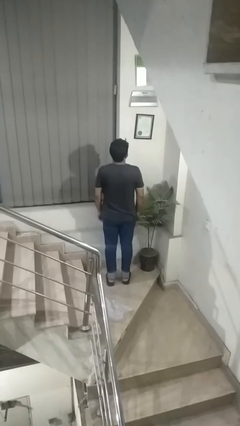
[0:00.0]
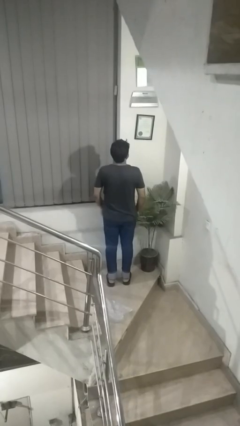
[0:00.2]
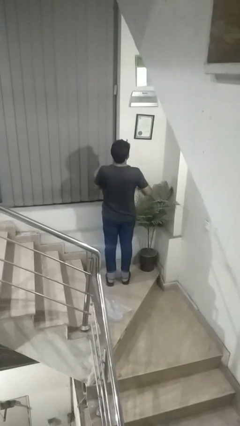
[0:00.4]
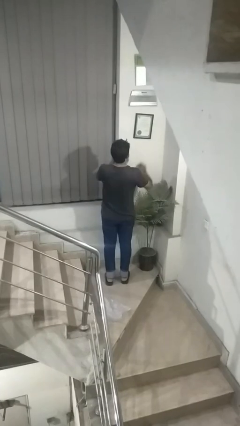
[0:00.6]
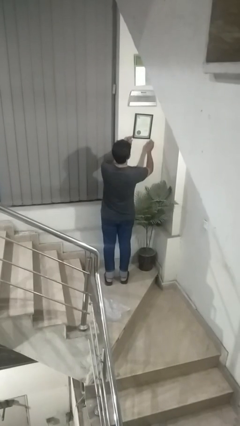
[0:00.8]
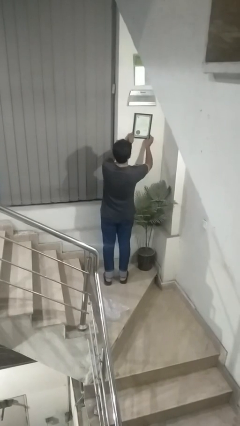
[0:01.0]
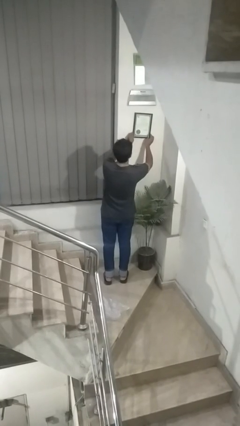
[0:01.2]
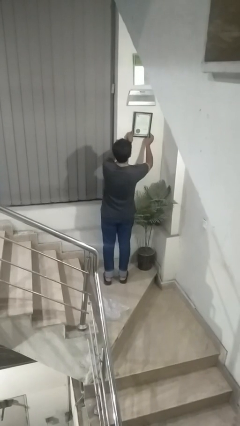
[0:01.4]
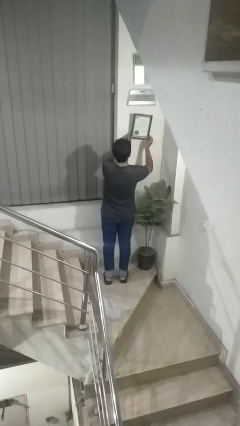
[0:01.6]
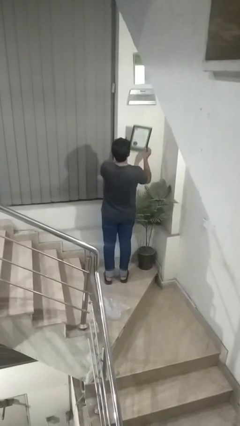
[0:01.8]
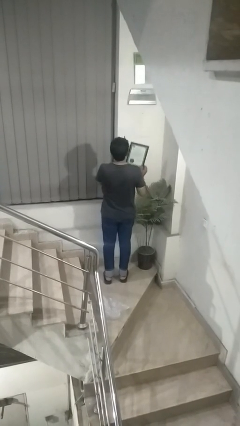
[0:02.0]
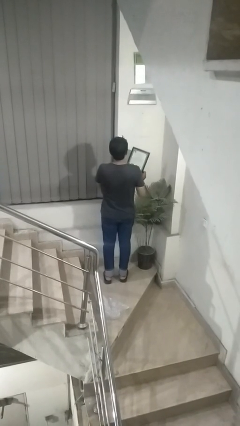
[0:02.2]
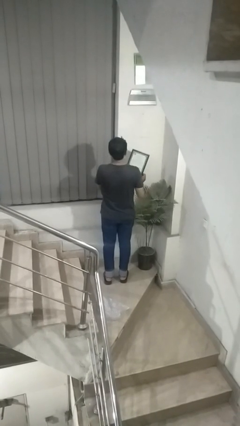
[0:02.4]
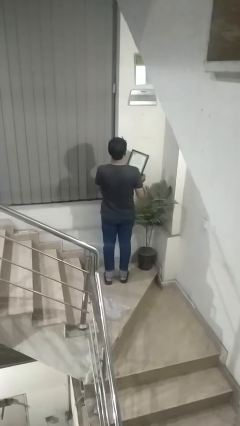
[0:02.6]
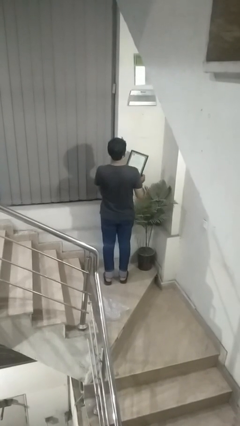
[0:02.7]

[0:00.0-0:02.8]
person takes down picture frame

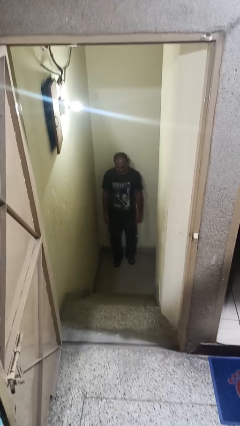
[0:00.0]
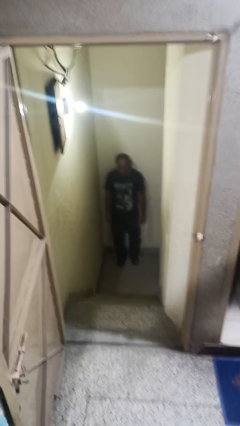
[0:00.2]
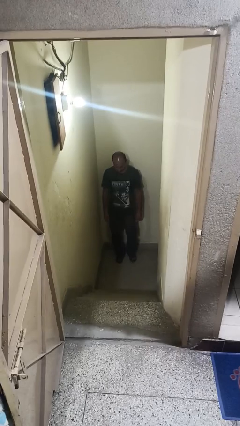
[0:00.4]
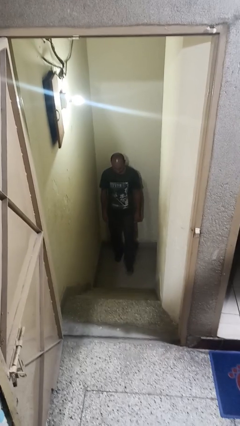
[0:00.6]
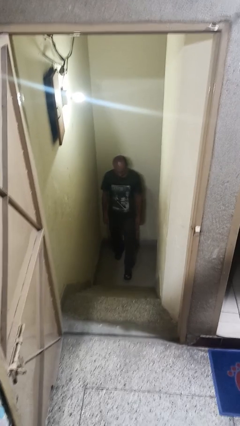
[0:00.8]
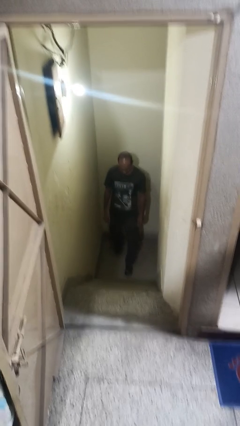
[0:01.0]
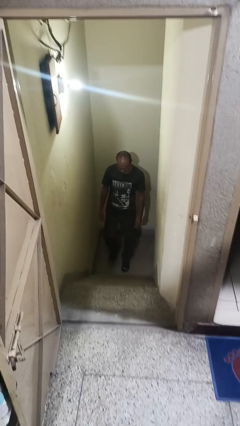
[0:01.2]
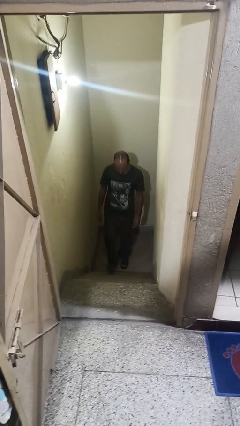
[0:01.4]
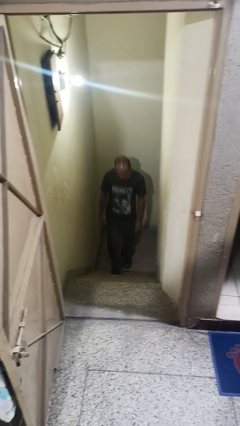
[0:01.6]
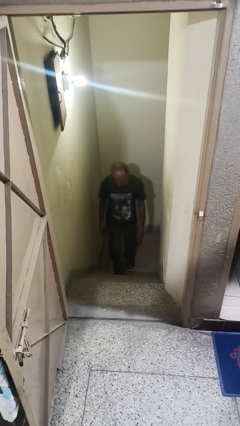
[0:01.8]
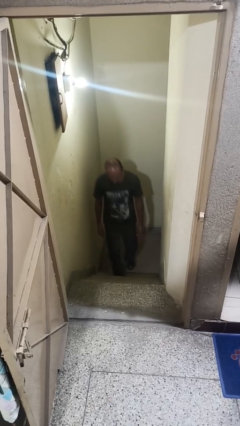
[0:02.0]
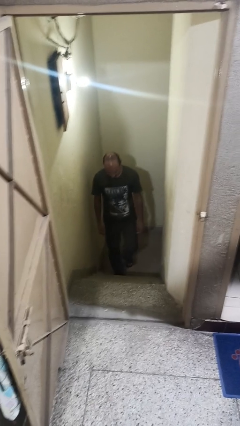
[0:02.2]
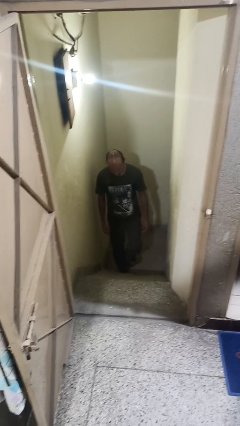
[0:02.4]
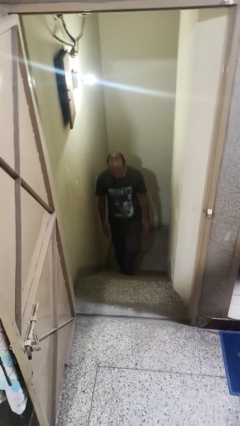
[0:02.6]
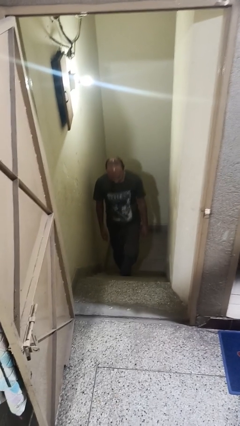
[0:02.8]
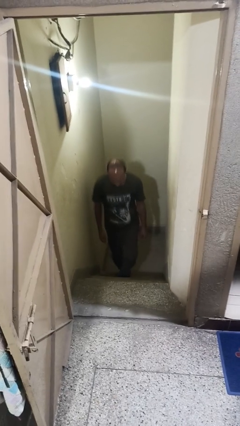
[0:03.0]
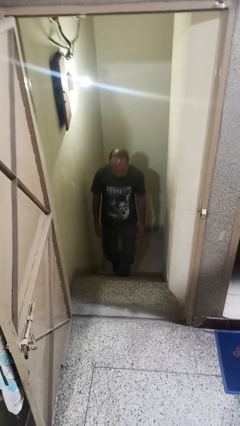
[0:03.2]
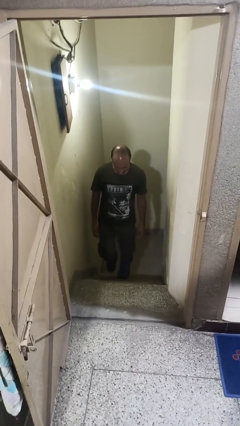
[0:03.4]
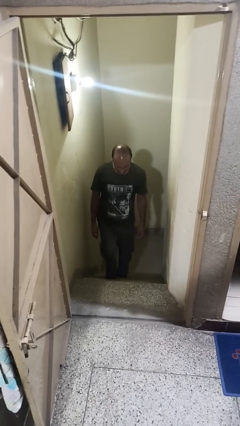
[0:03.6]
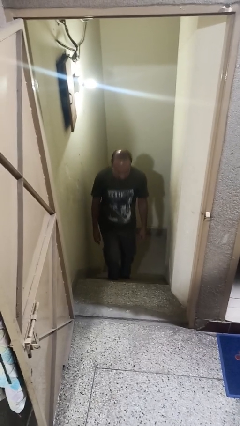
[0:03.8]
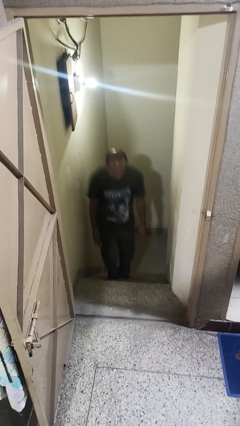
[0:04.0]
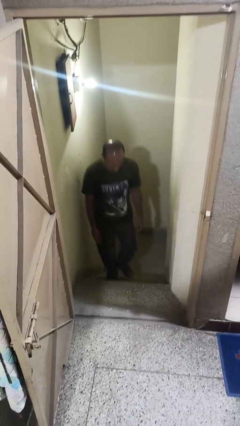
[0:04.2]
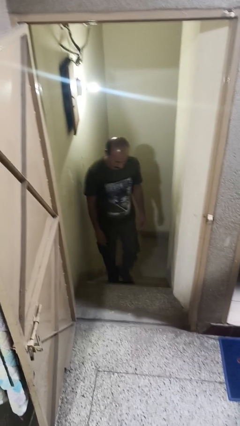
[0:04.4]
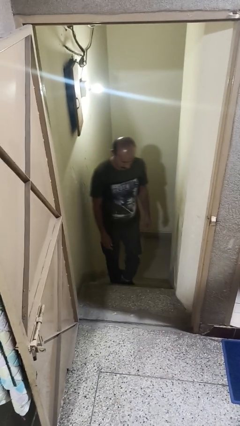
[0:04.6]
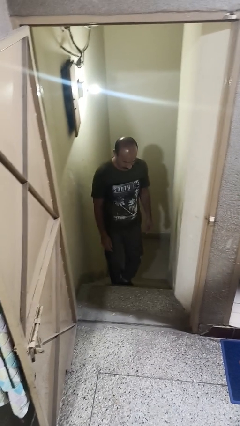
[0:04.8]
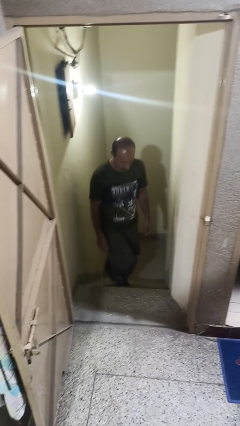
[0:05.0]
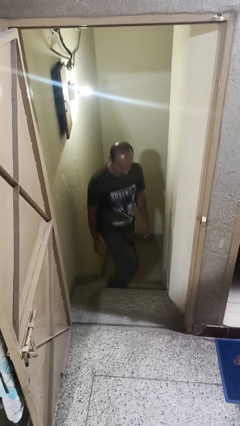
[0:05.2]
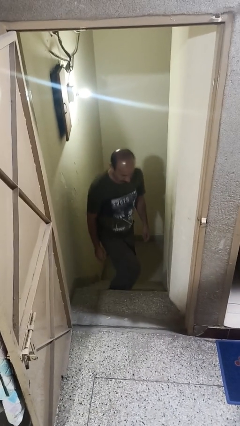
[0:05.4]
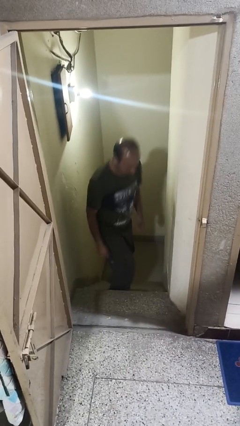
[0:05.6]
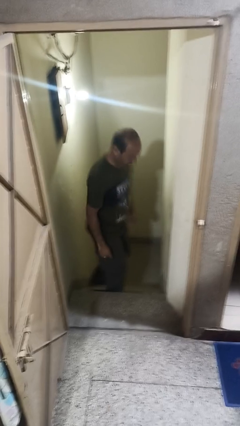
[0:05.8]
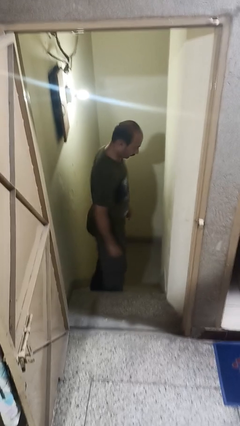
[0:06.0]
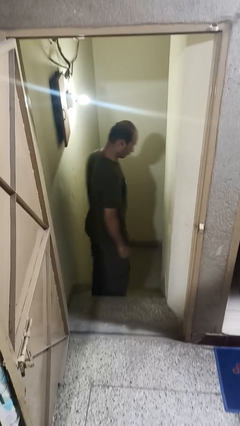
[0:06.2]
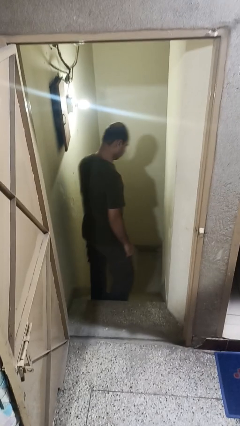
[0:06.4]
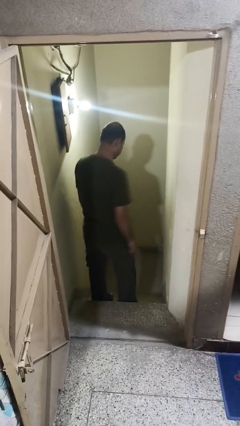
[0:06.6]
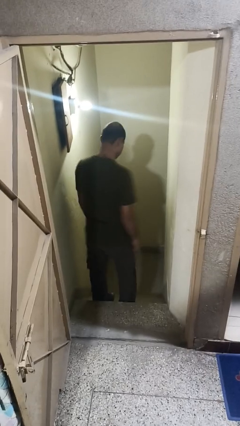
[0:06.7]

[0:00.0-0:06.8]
person climbs up stairs

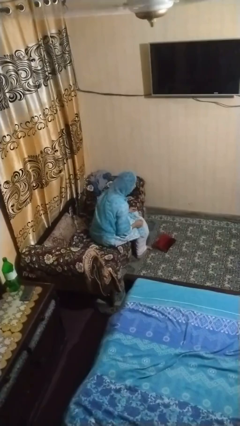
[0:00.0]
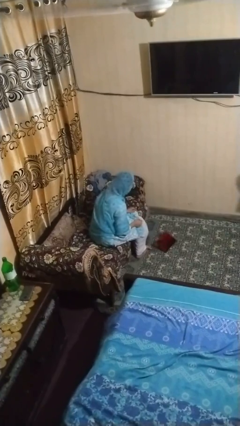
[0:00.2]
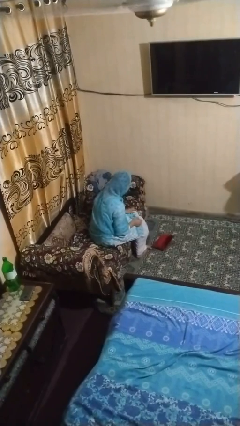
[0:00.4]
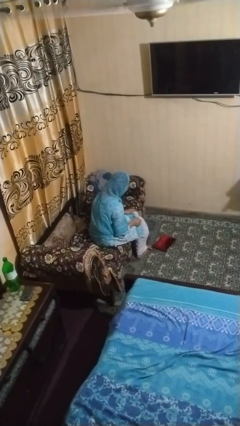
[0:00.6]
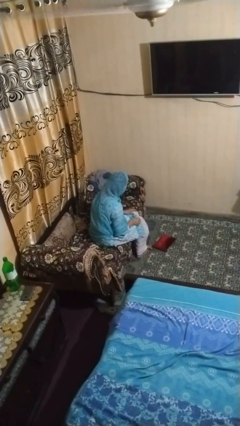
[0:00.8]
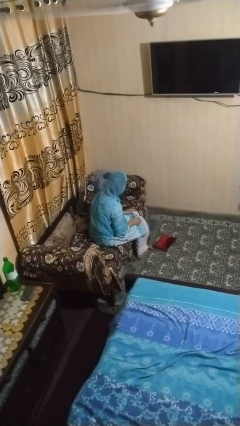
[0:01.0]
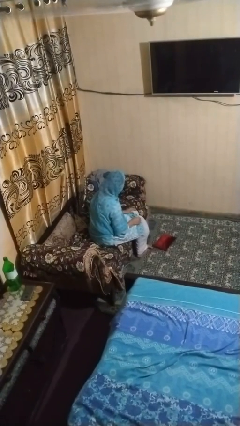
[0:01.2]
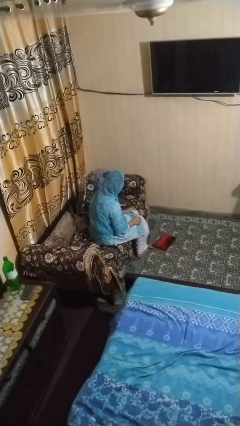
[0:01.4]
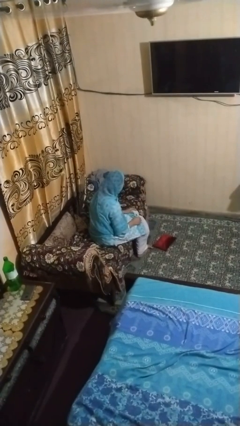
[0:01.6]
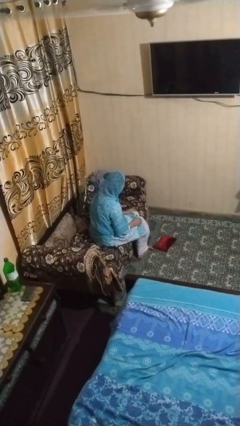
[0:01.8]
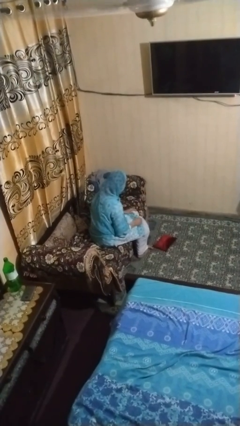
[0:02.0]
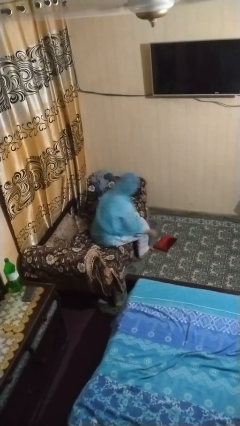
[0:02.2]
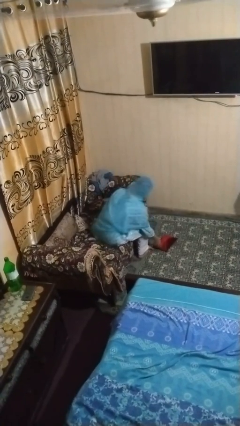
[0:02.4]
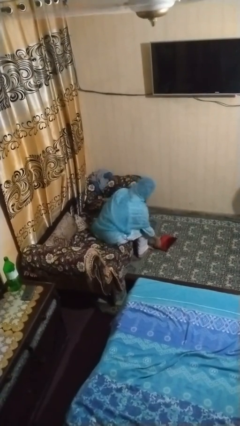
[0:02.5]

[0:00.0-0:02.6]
person drops object

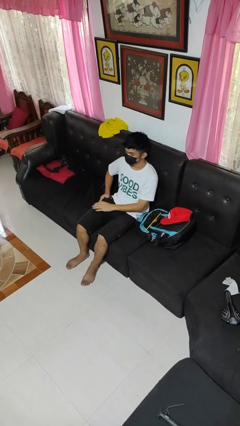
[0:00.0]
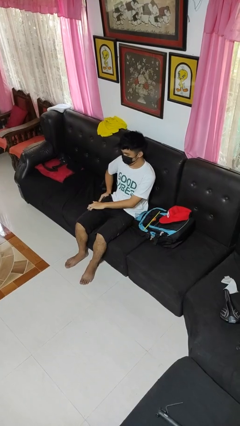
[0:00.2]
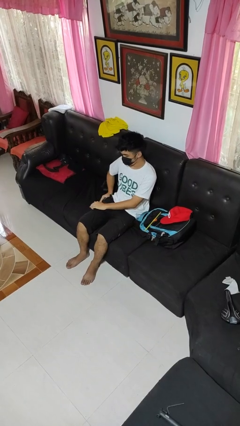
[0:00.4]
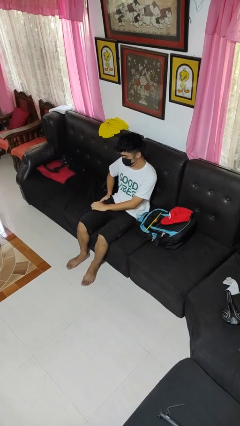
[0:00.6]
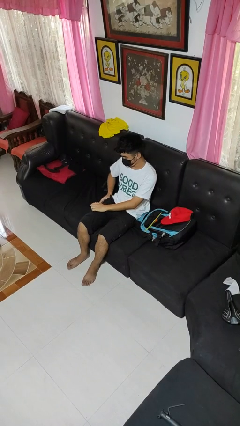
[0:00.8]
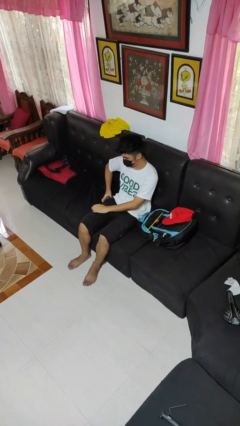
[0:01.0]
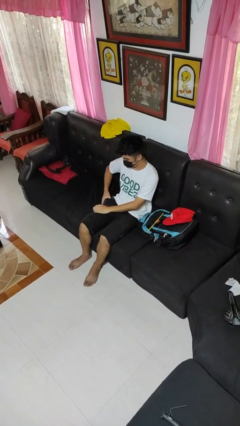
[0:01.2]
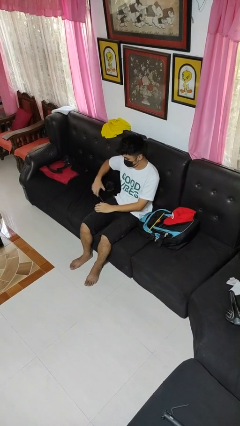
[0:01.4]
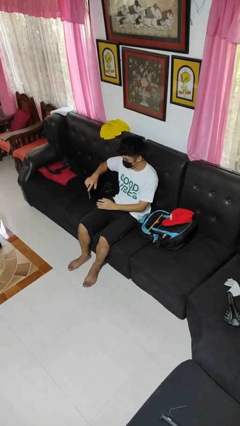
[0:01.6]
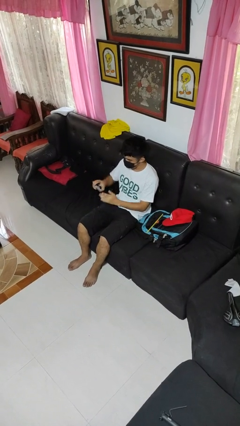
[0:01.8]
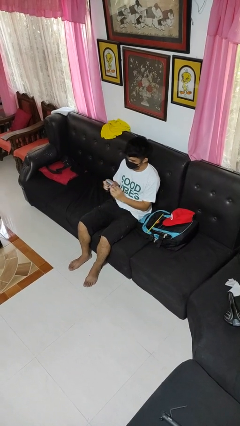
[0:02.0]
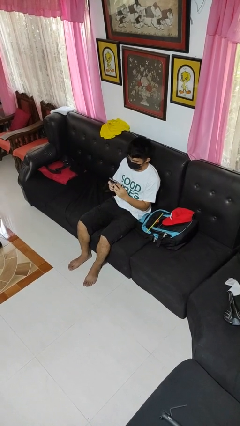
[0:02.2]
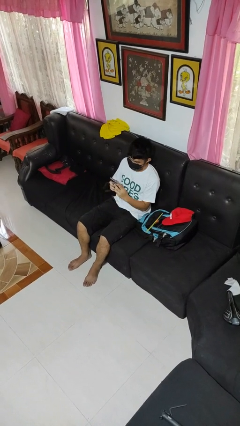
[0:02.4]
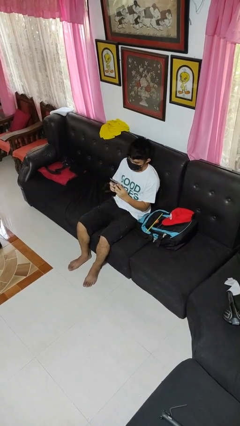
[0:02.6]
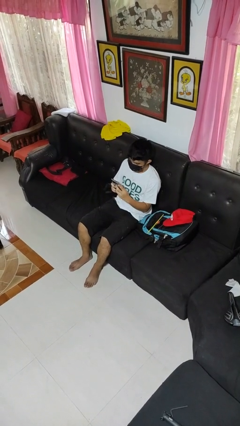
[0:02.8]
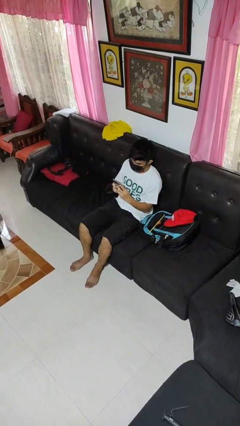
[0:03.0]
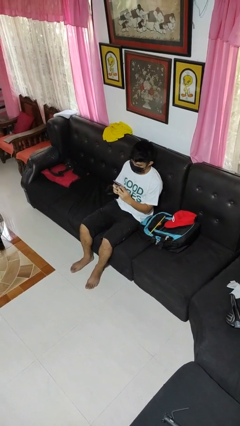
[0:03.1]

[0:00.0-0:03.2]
person takes phone from pocket

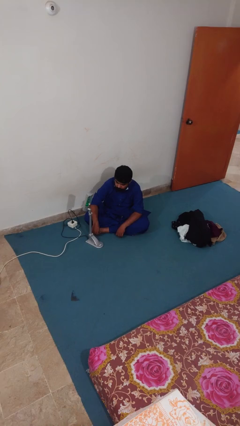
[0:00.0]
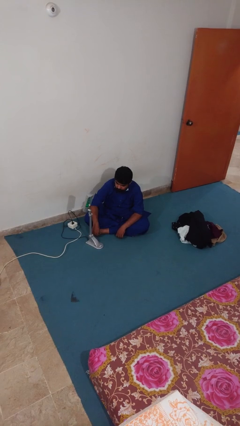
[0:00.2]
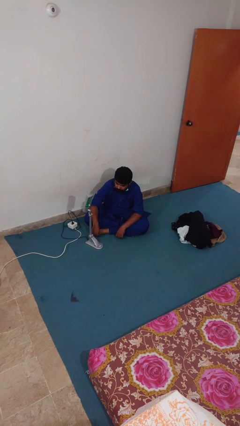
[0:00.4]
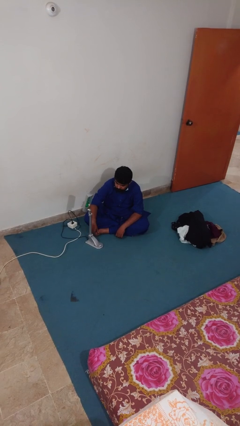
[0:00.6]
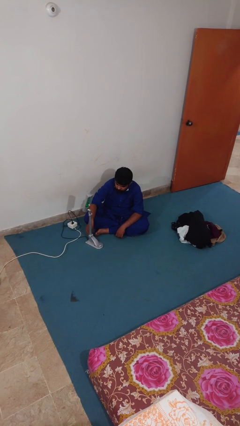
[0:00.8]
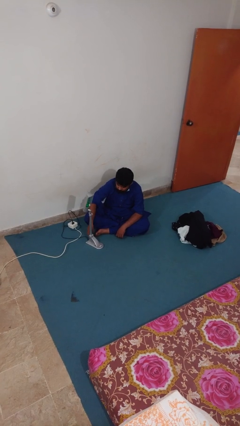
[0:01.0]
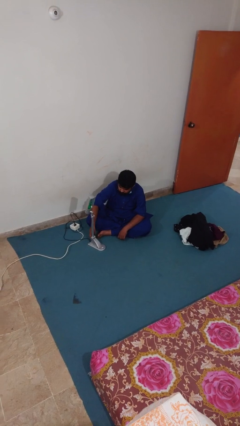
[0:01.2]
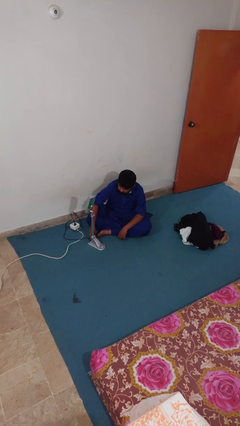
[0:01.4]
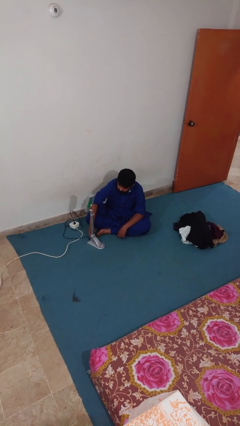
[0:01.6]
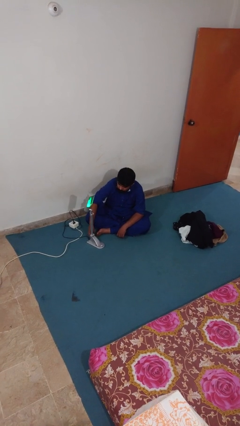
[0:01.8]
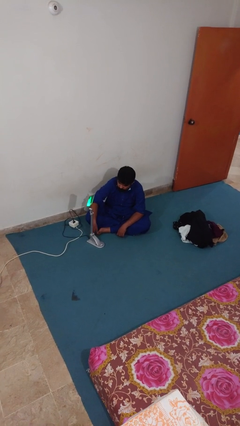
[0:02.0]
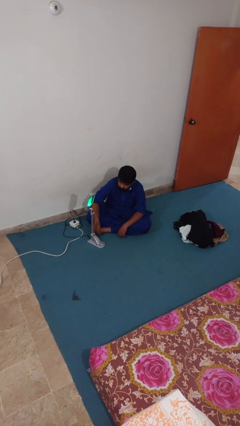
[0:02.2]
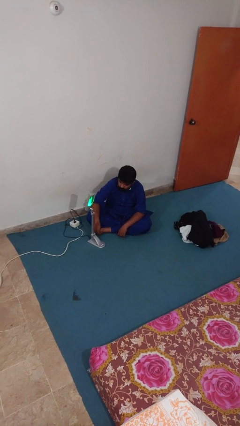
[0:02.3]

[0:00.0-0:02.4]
person turns on lamp
